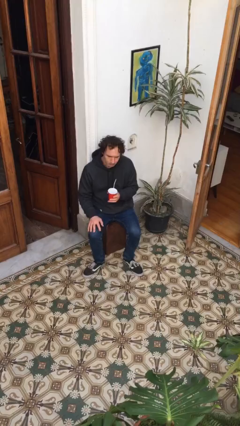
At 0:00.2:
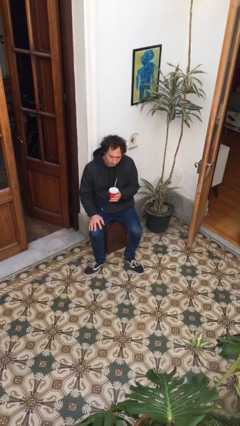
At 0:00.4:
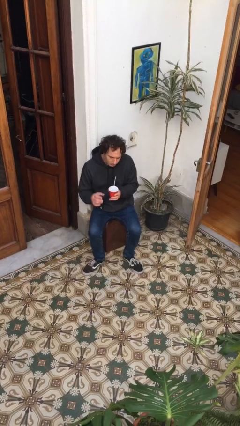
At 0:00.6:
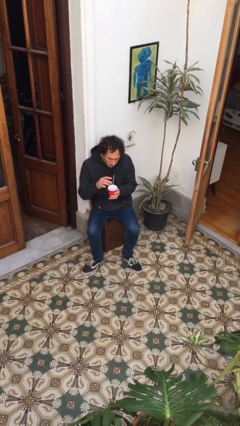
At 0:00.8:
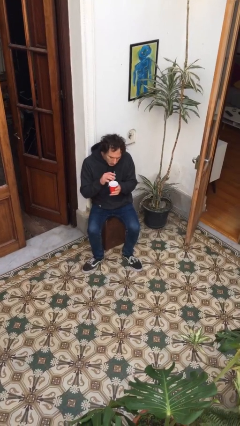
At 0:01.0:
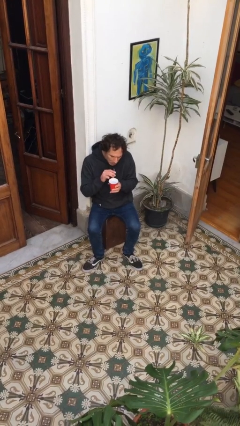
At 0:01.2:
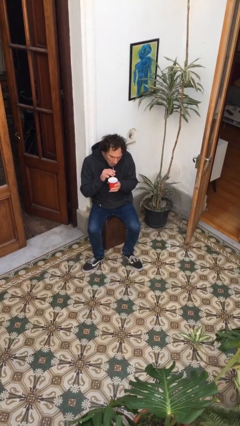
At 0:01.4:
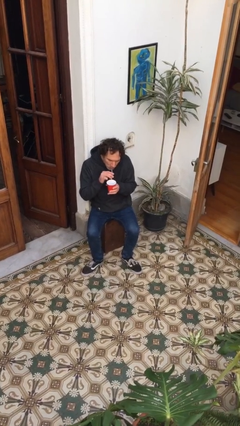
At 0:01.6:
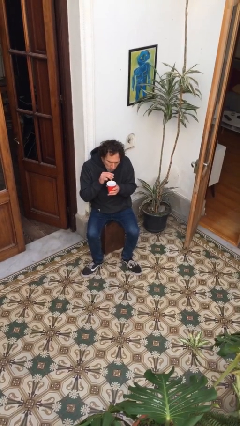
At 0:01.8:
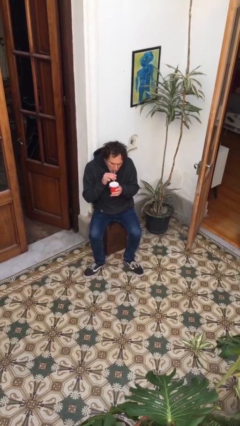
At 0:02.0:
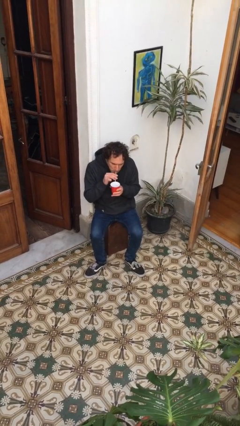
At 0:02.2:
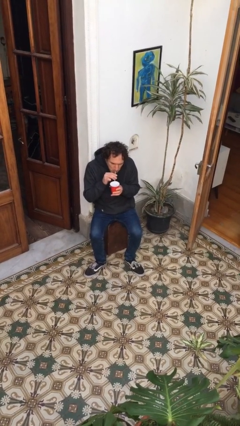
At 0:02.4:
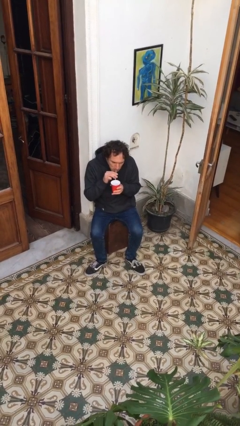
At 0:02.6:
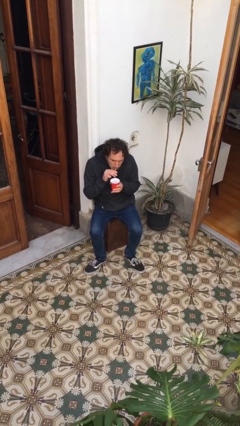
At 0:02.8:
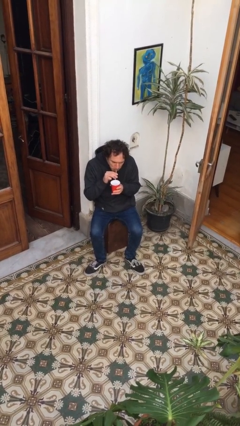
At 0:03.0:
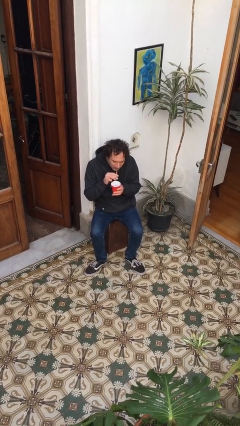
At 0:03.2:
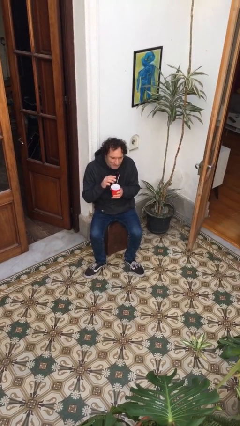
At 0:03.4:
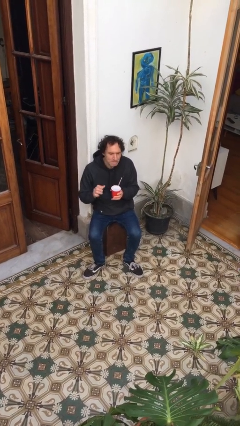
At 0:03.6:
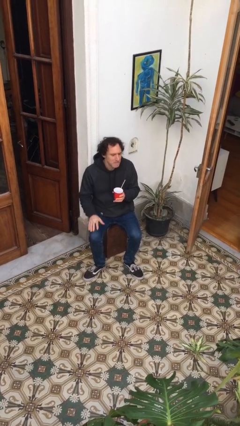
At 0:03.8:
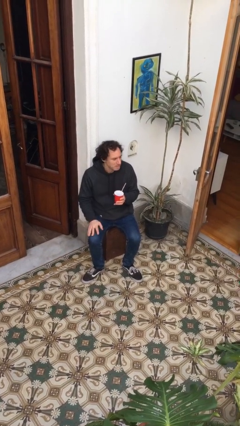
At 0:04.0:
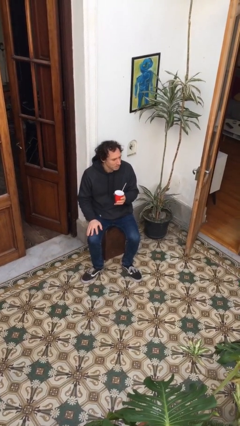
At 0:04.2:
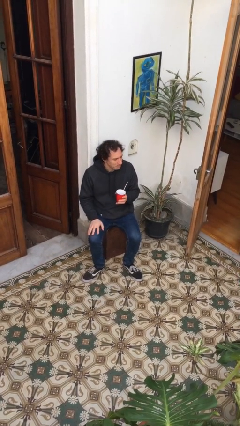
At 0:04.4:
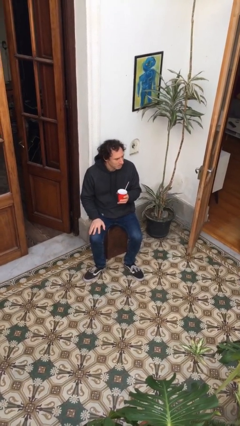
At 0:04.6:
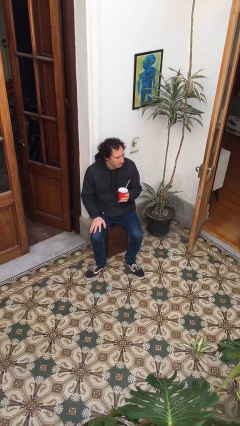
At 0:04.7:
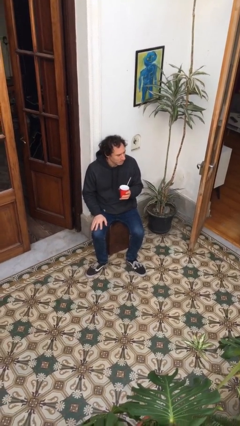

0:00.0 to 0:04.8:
person drinks from straw

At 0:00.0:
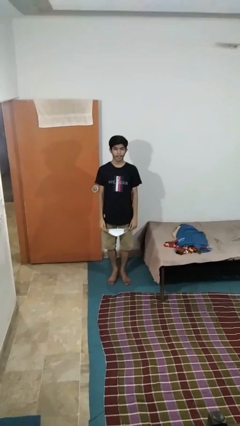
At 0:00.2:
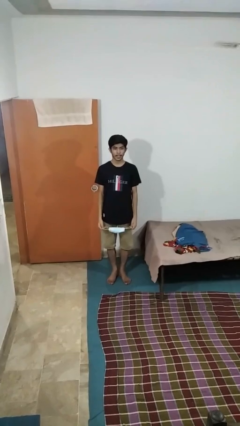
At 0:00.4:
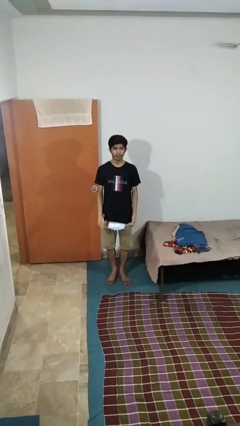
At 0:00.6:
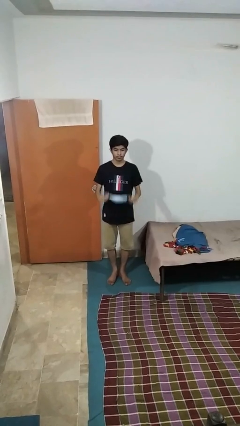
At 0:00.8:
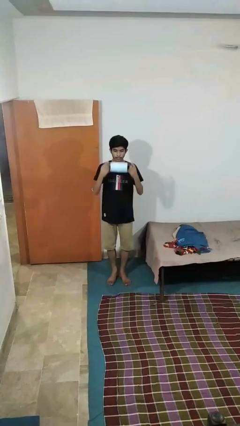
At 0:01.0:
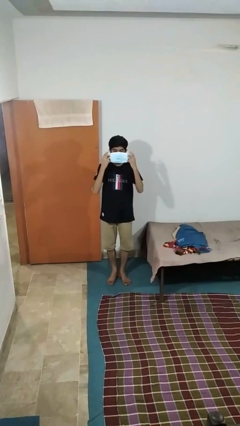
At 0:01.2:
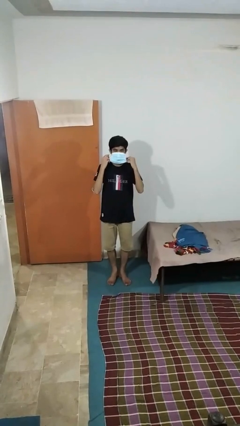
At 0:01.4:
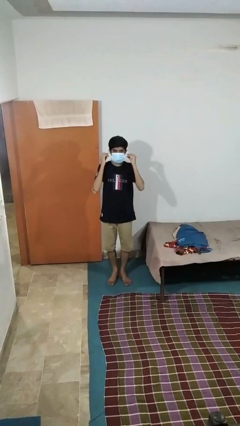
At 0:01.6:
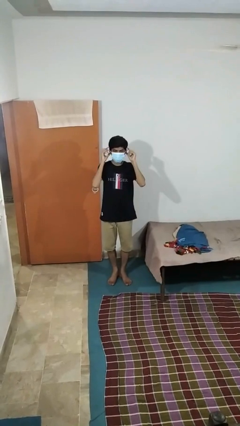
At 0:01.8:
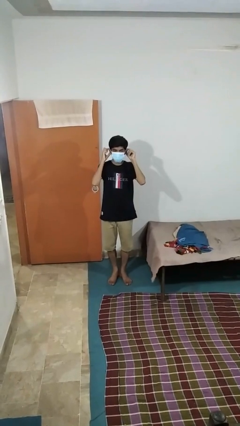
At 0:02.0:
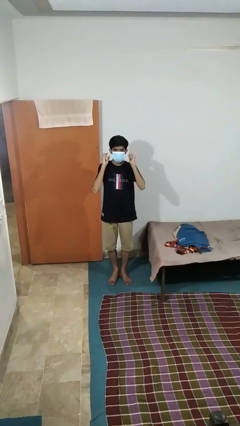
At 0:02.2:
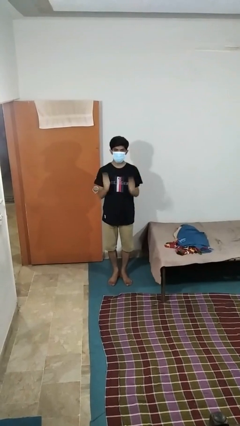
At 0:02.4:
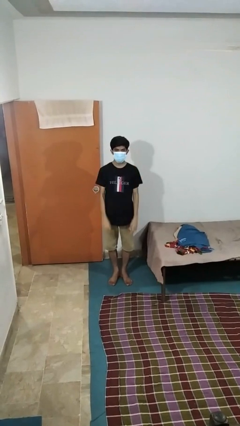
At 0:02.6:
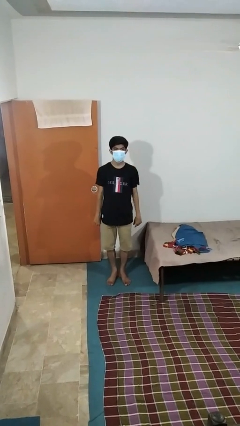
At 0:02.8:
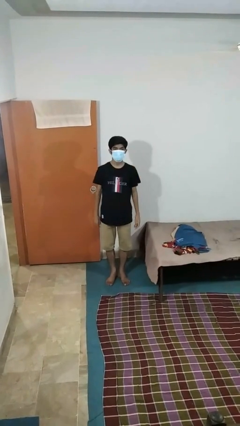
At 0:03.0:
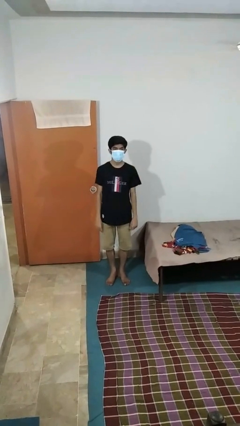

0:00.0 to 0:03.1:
person puts on facemask

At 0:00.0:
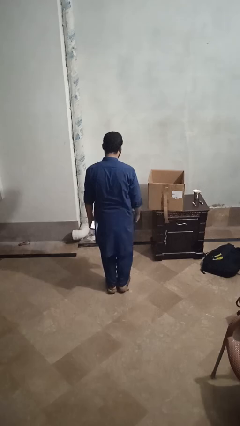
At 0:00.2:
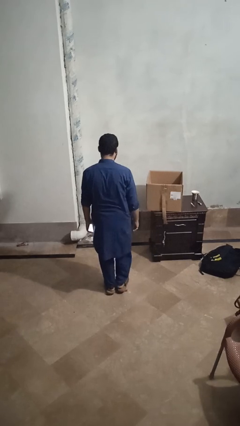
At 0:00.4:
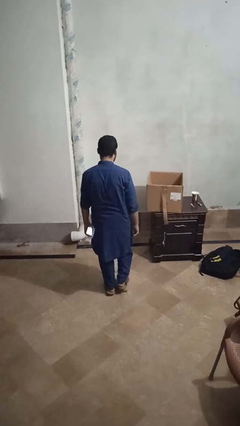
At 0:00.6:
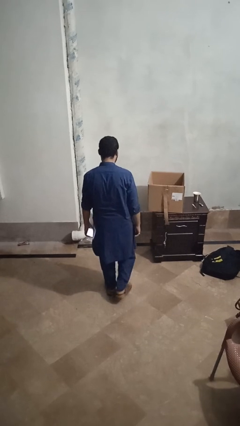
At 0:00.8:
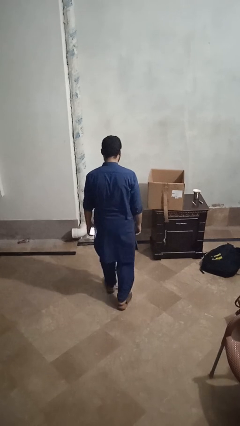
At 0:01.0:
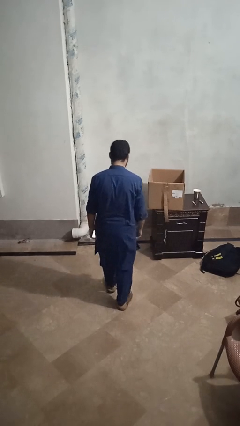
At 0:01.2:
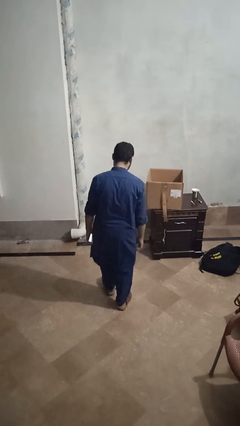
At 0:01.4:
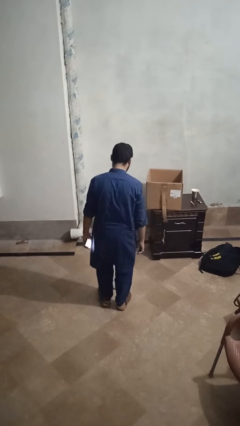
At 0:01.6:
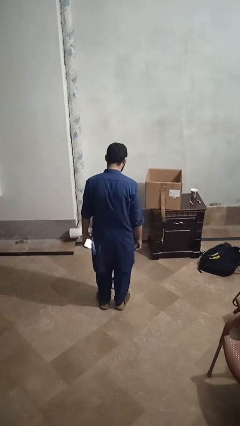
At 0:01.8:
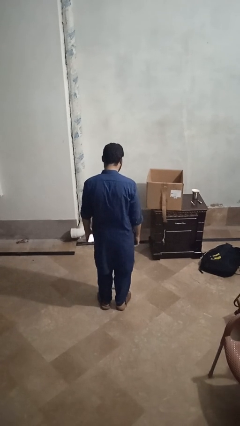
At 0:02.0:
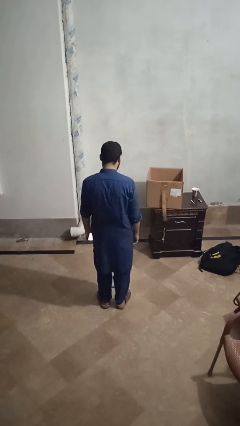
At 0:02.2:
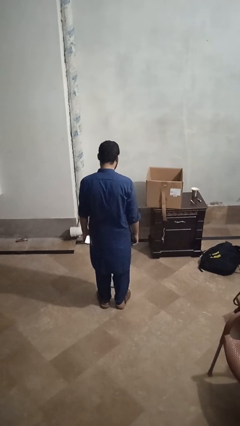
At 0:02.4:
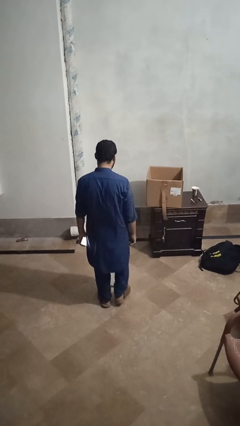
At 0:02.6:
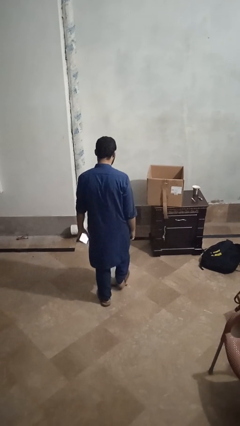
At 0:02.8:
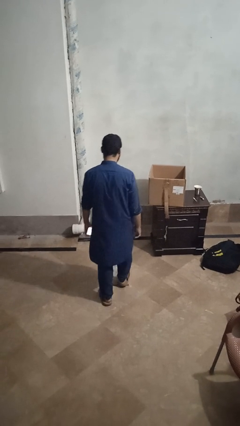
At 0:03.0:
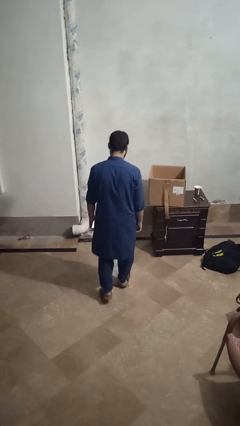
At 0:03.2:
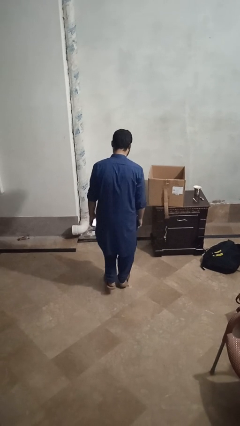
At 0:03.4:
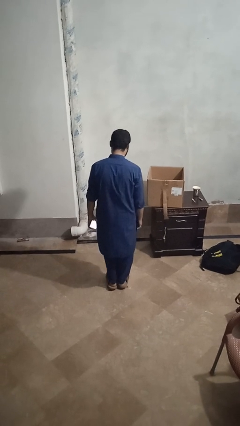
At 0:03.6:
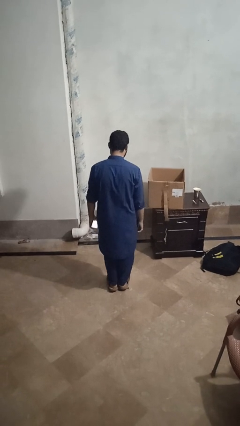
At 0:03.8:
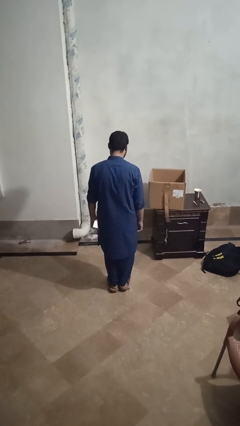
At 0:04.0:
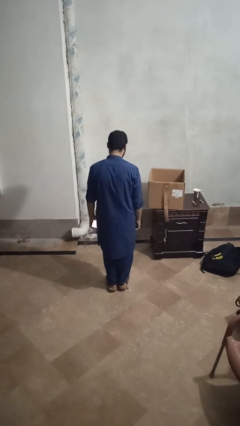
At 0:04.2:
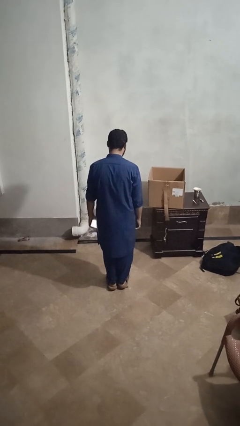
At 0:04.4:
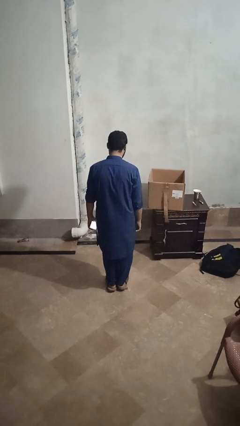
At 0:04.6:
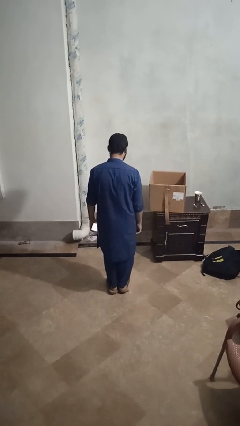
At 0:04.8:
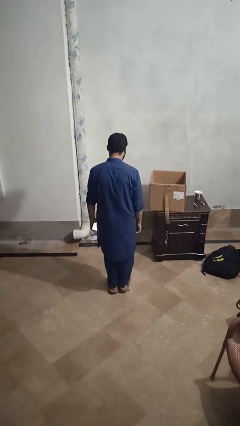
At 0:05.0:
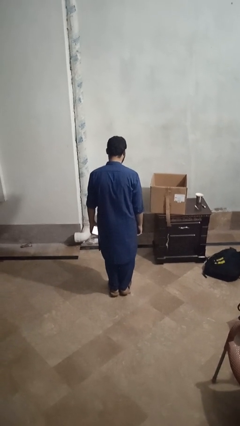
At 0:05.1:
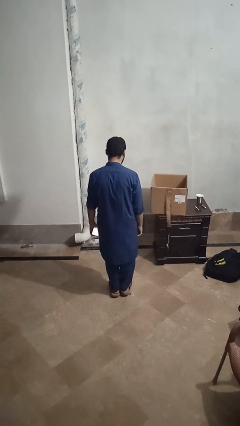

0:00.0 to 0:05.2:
person uses bodyweight scale

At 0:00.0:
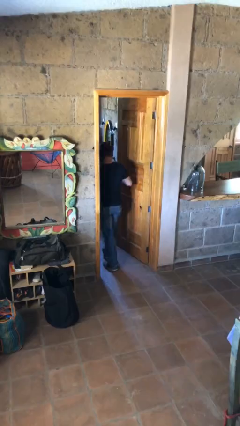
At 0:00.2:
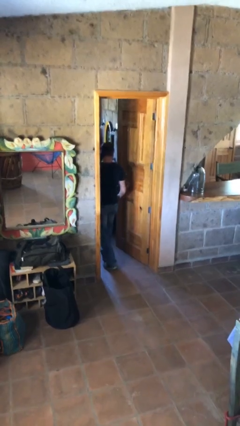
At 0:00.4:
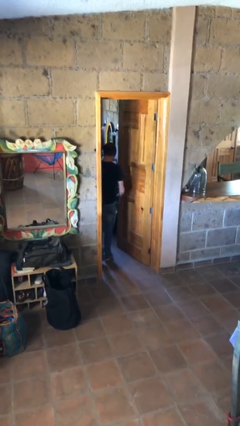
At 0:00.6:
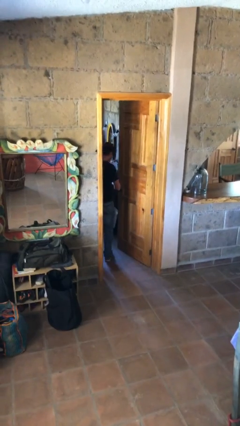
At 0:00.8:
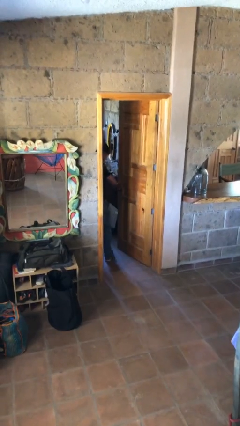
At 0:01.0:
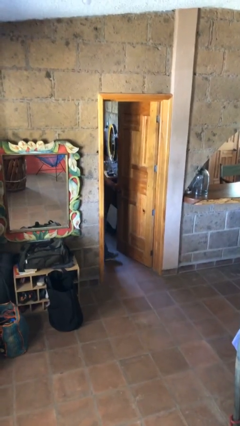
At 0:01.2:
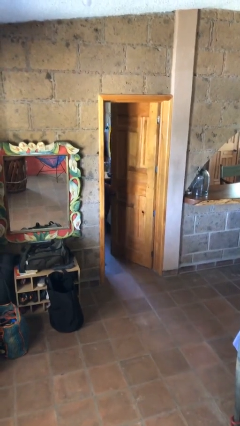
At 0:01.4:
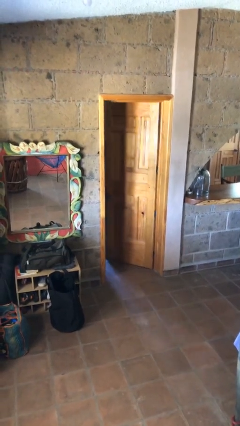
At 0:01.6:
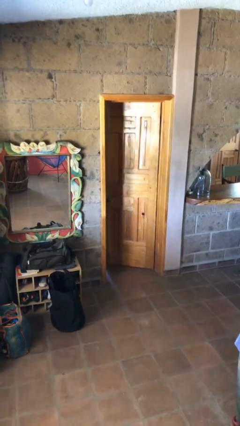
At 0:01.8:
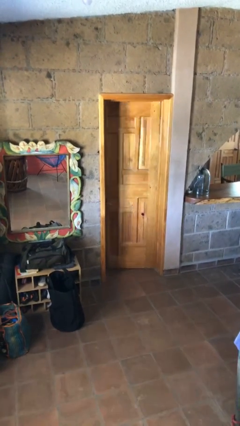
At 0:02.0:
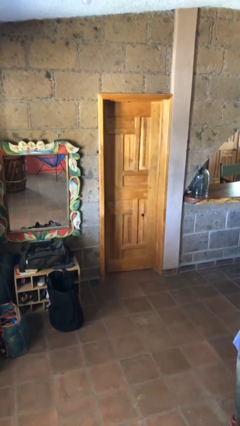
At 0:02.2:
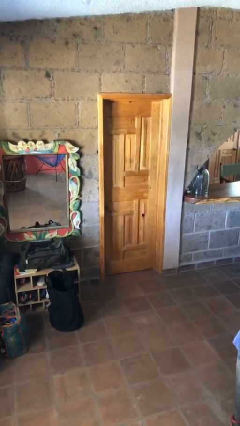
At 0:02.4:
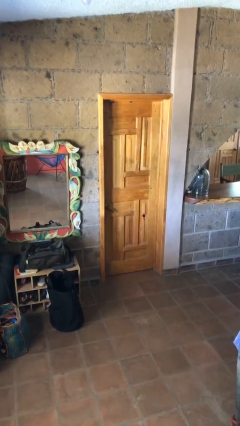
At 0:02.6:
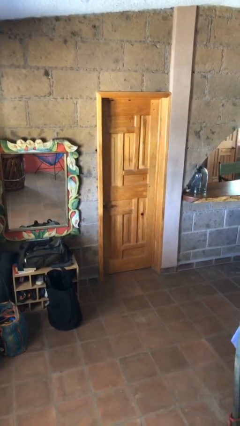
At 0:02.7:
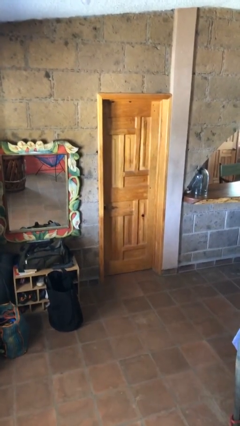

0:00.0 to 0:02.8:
person closes facility door

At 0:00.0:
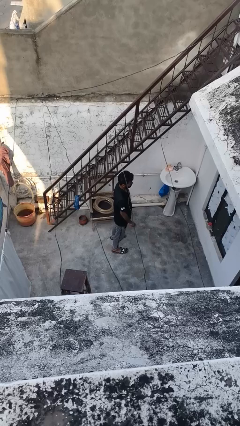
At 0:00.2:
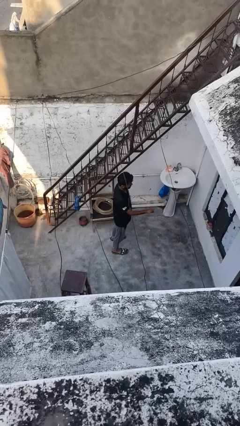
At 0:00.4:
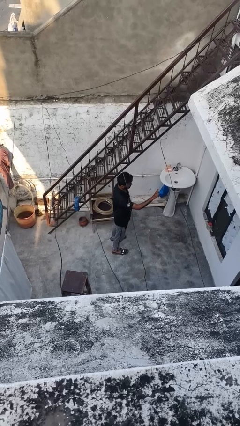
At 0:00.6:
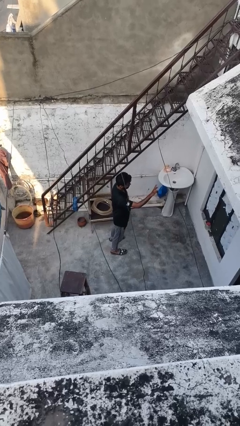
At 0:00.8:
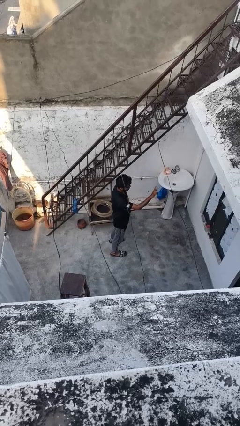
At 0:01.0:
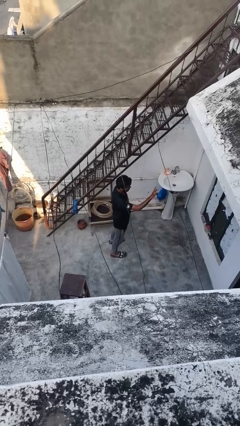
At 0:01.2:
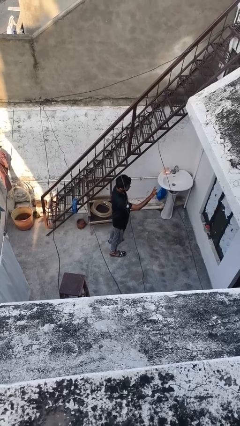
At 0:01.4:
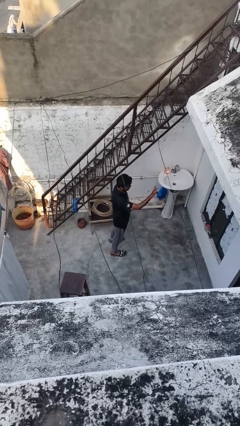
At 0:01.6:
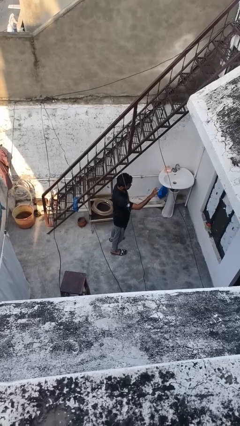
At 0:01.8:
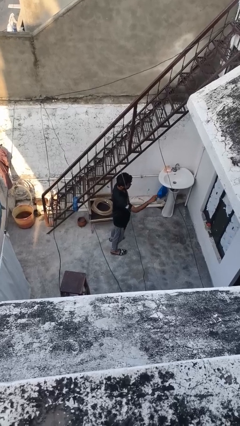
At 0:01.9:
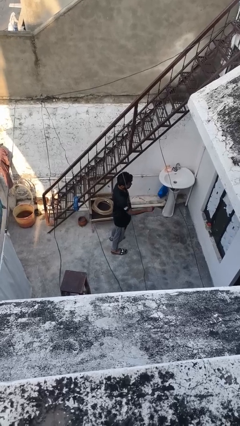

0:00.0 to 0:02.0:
person gestures peace
